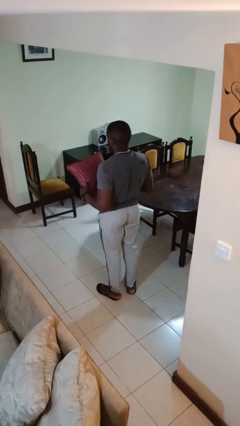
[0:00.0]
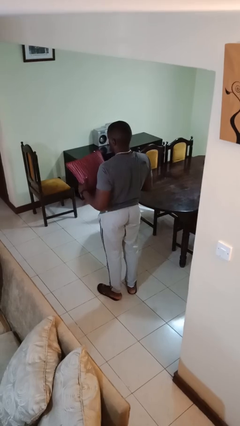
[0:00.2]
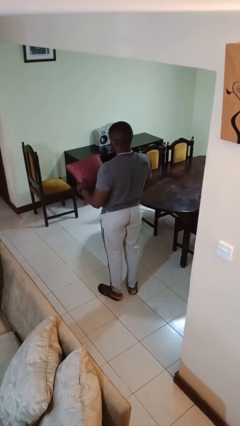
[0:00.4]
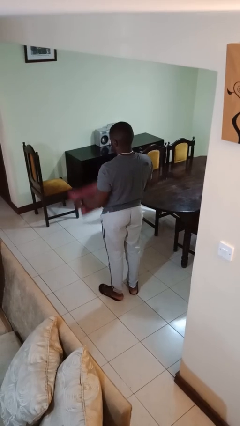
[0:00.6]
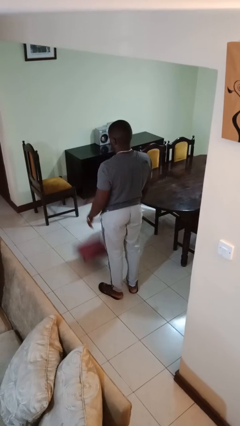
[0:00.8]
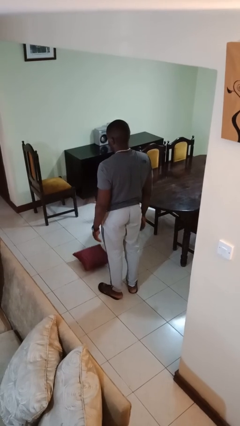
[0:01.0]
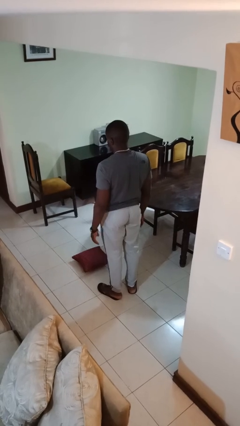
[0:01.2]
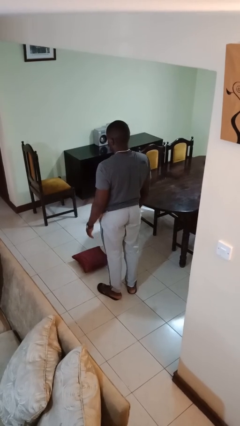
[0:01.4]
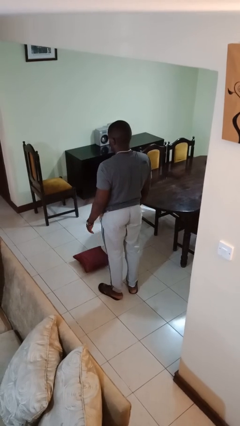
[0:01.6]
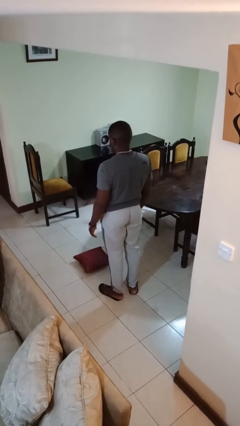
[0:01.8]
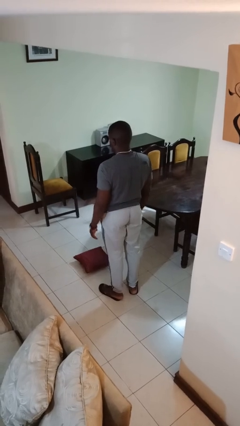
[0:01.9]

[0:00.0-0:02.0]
person throws object to ground

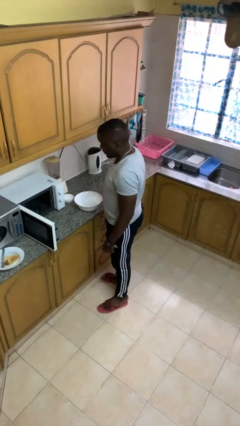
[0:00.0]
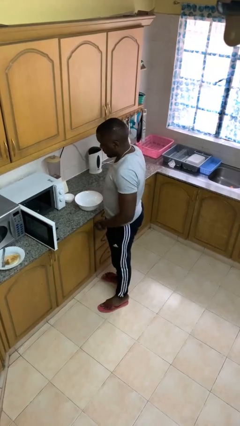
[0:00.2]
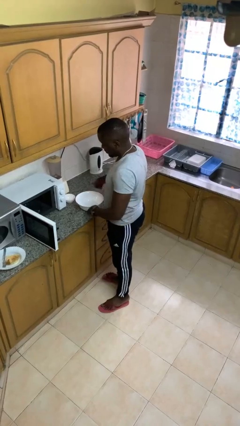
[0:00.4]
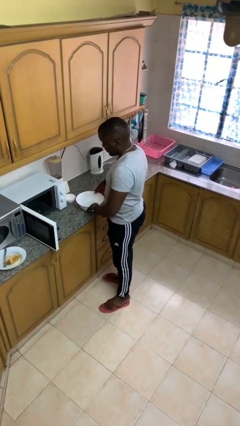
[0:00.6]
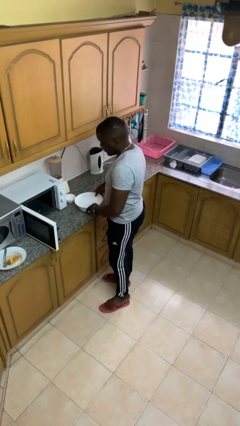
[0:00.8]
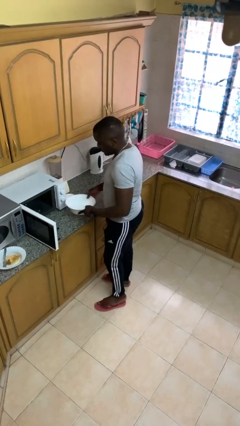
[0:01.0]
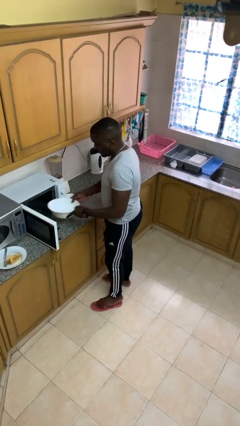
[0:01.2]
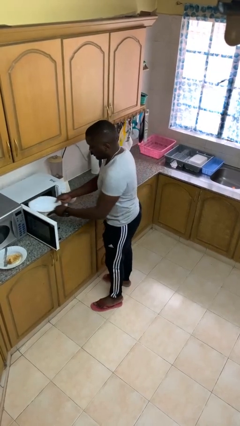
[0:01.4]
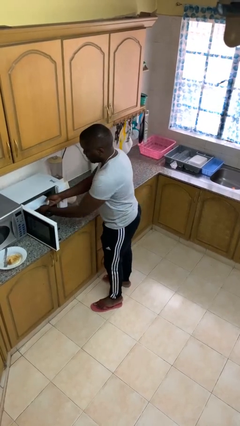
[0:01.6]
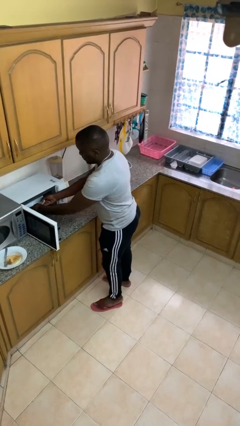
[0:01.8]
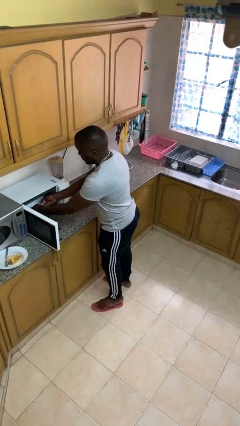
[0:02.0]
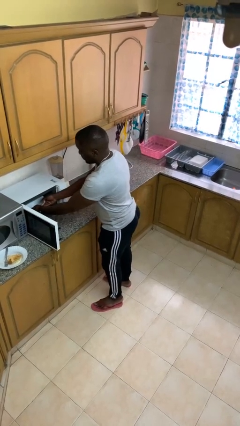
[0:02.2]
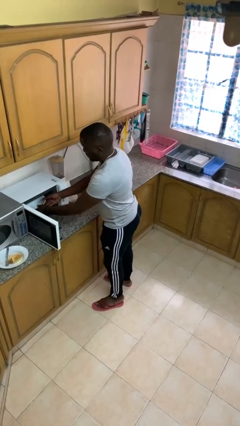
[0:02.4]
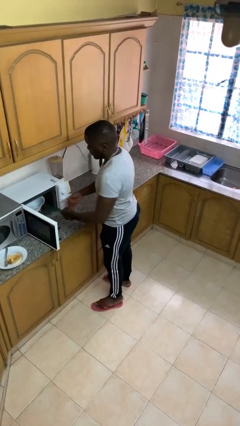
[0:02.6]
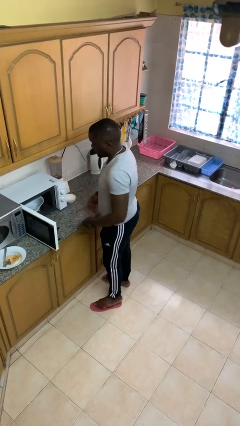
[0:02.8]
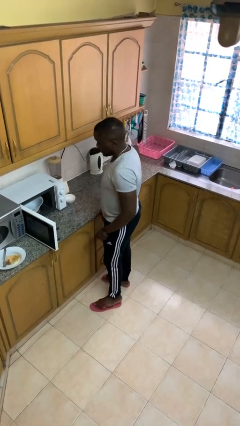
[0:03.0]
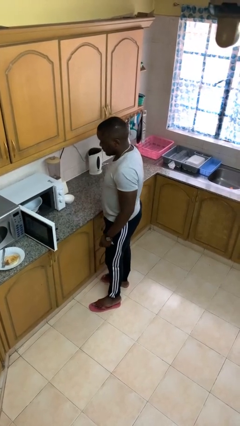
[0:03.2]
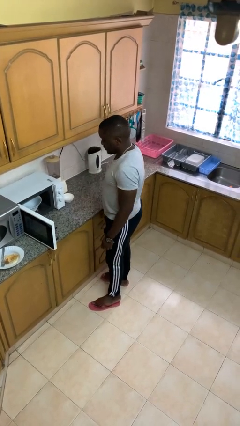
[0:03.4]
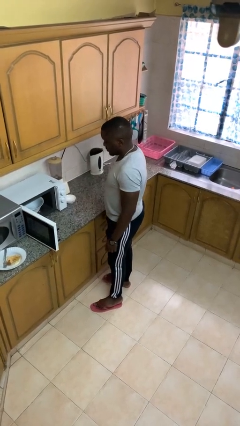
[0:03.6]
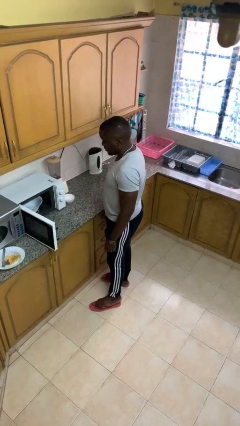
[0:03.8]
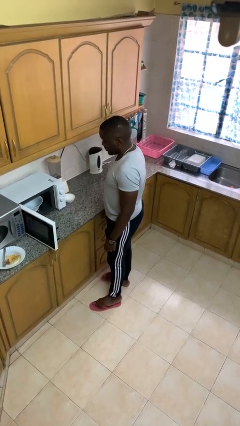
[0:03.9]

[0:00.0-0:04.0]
person puts object into microwave

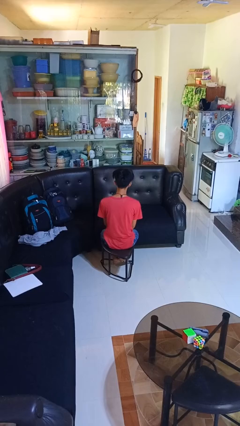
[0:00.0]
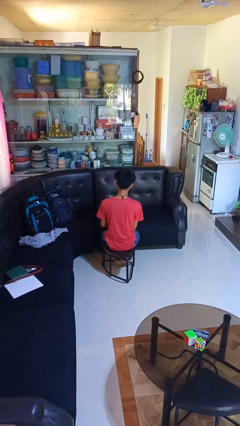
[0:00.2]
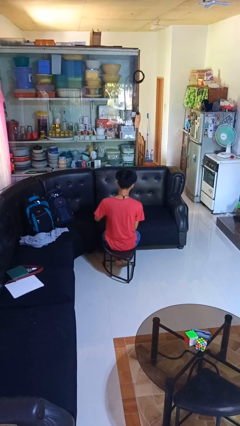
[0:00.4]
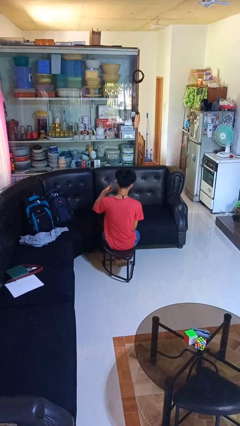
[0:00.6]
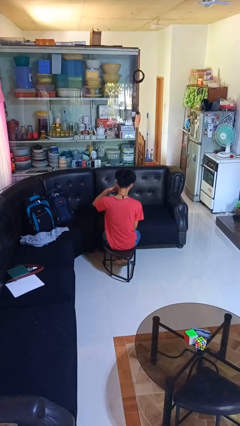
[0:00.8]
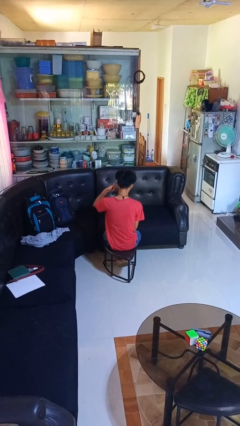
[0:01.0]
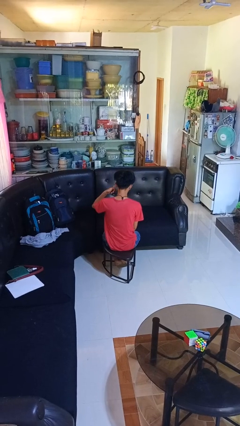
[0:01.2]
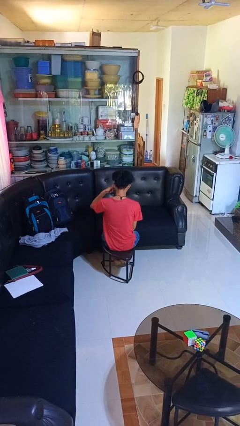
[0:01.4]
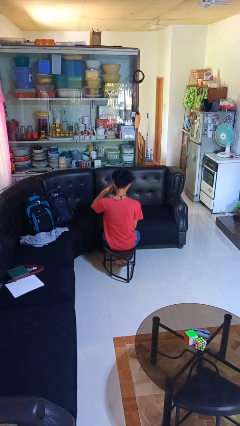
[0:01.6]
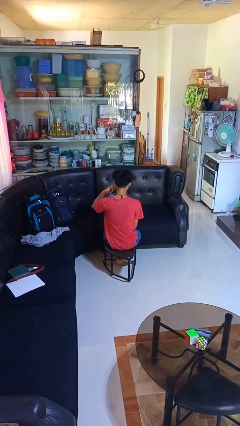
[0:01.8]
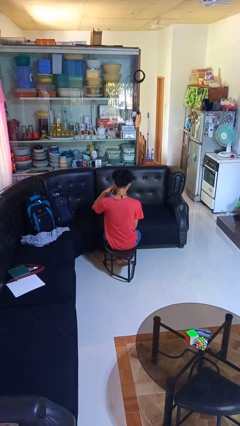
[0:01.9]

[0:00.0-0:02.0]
person gestures call me

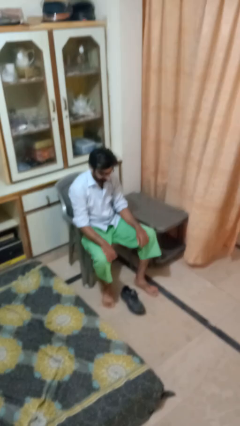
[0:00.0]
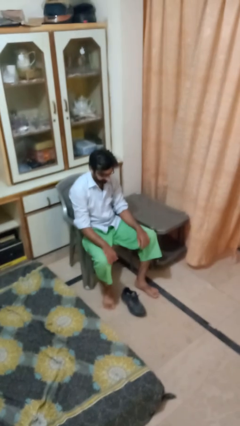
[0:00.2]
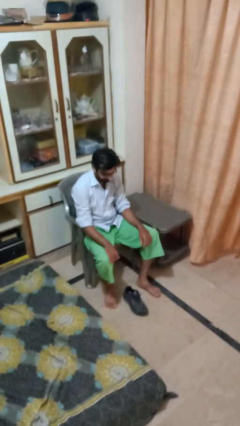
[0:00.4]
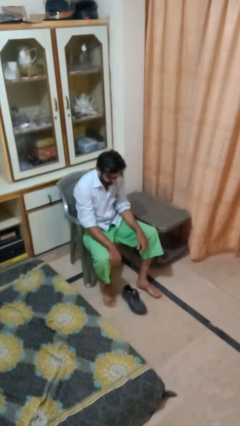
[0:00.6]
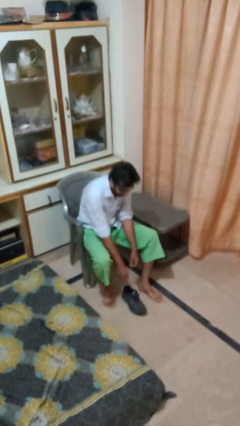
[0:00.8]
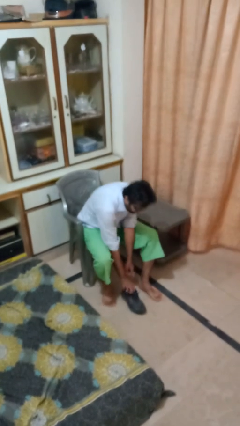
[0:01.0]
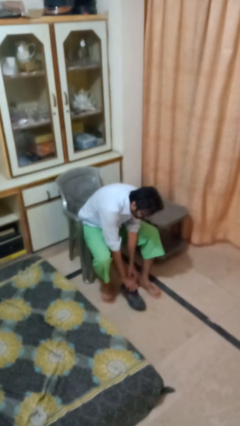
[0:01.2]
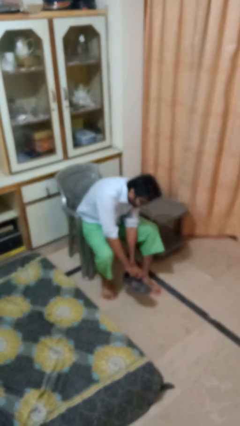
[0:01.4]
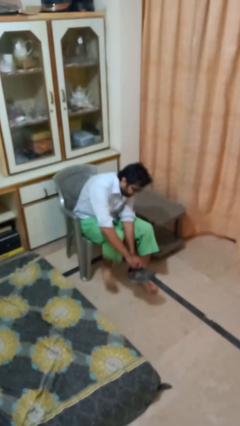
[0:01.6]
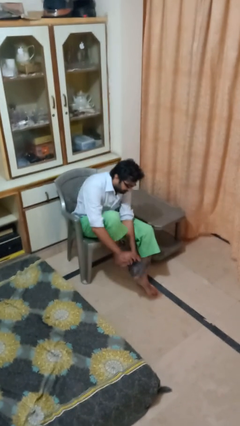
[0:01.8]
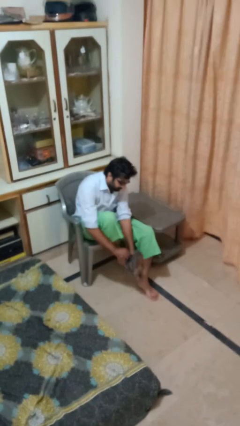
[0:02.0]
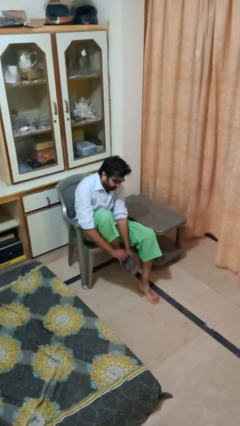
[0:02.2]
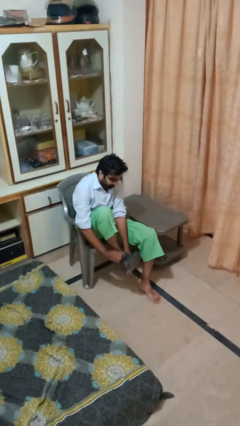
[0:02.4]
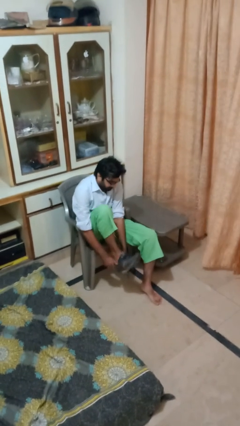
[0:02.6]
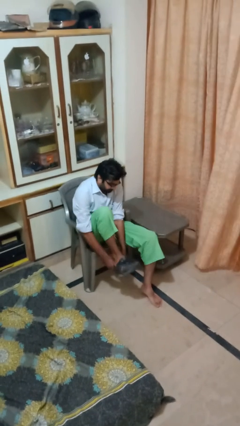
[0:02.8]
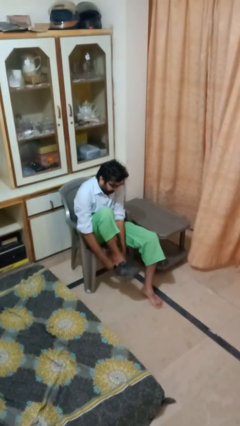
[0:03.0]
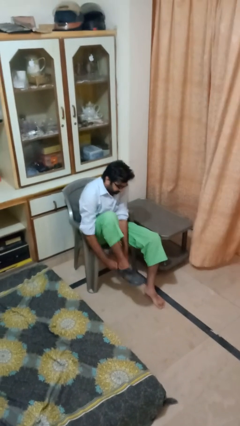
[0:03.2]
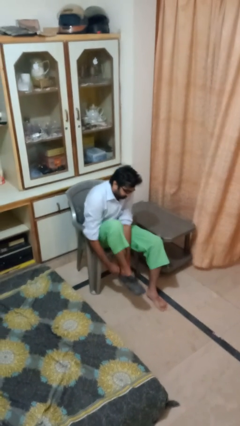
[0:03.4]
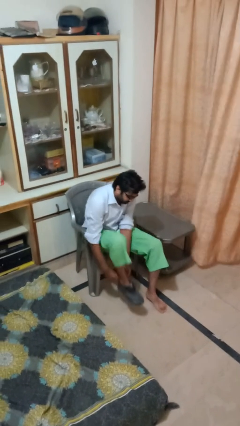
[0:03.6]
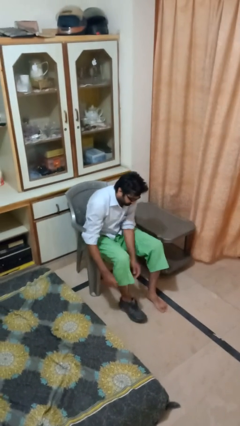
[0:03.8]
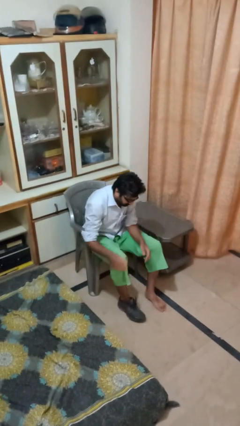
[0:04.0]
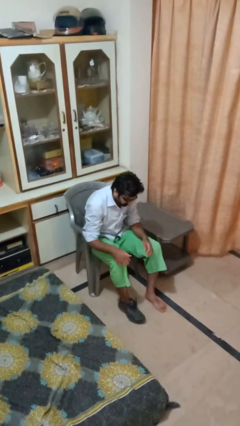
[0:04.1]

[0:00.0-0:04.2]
person puts on boots

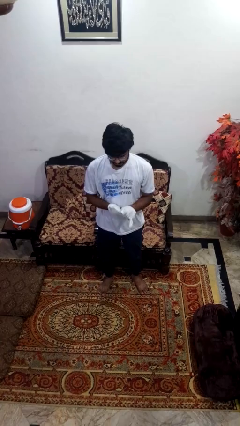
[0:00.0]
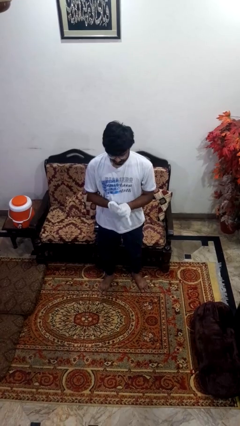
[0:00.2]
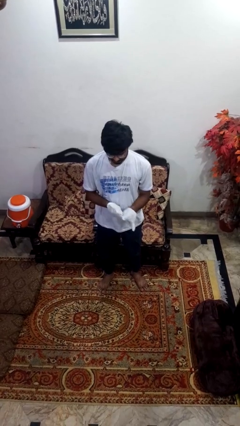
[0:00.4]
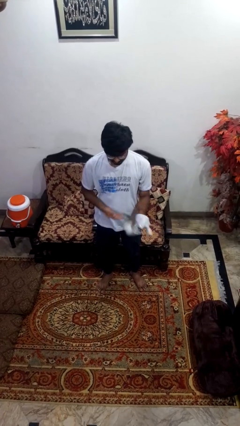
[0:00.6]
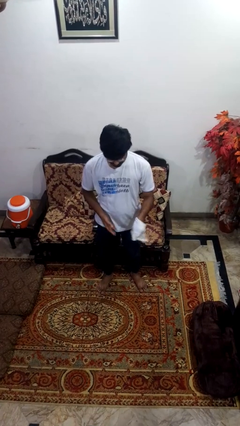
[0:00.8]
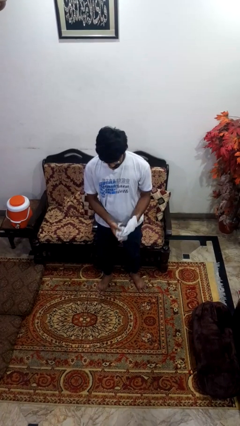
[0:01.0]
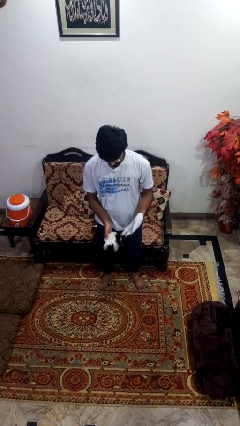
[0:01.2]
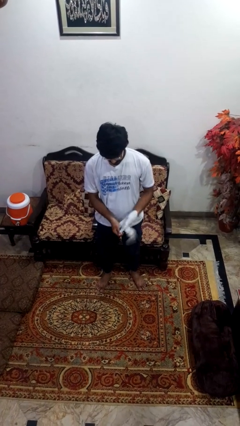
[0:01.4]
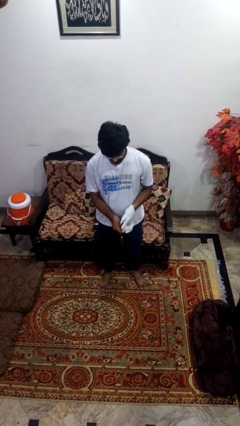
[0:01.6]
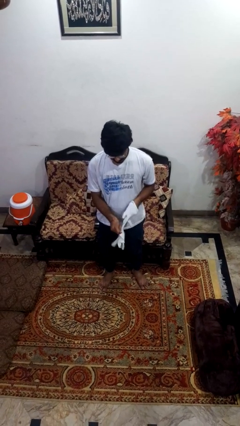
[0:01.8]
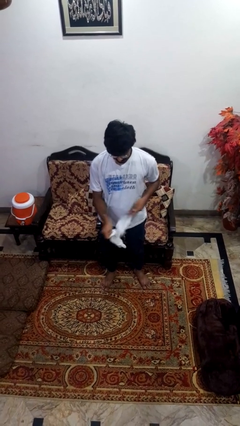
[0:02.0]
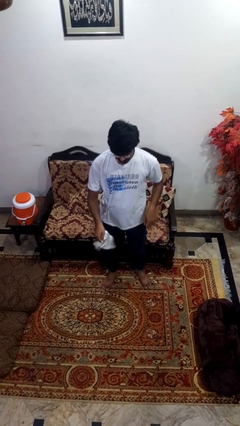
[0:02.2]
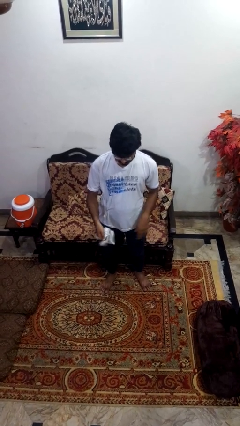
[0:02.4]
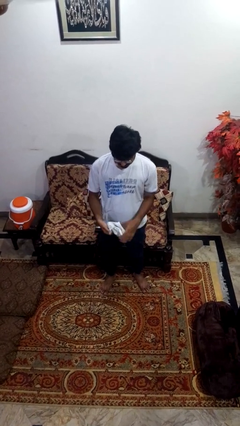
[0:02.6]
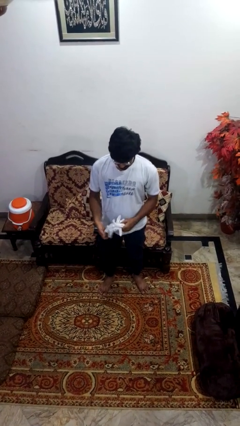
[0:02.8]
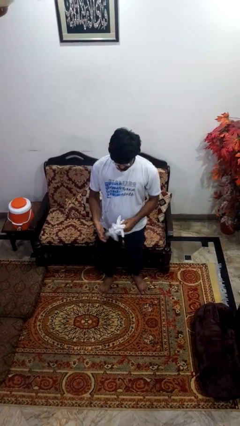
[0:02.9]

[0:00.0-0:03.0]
person takes off gloves

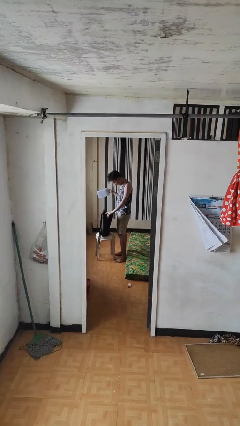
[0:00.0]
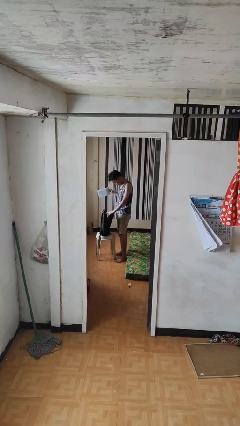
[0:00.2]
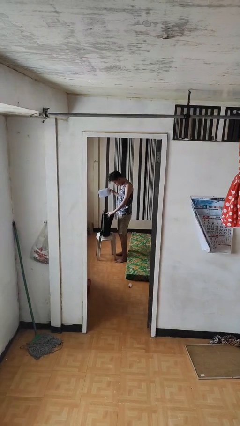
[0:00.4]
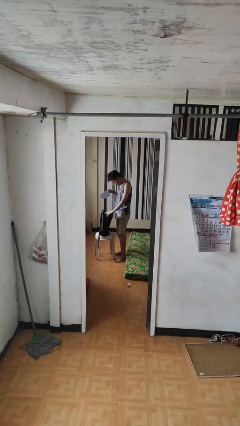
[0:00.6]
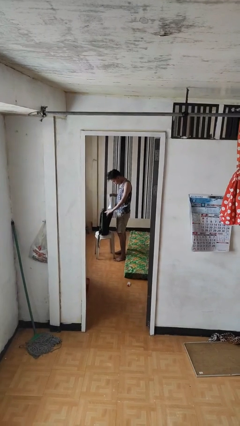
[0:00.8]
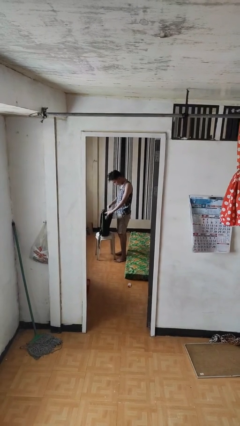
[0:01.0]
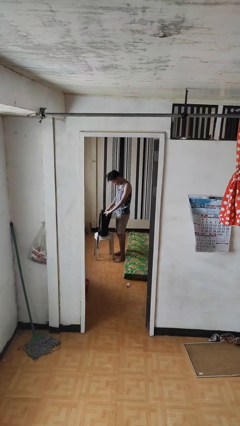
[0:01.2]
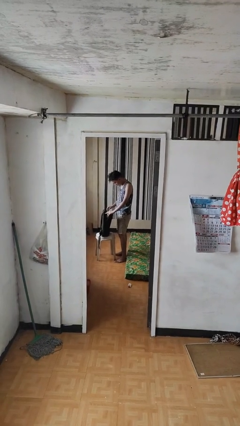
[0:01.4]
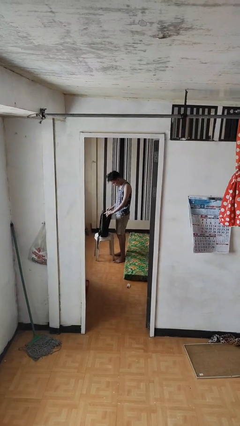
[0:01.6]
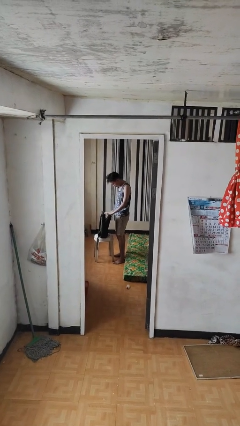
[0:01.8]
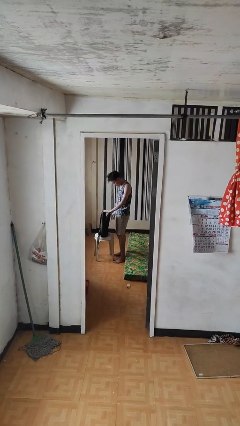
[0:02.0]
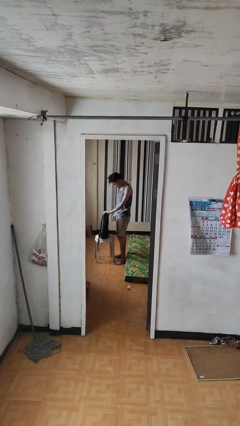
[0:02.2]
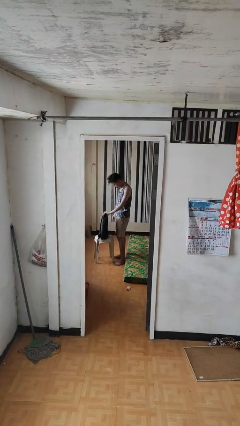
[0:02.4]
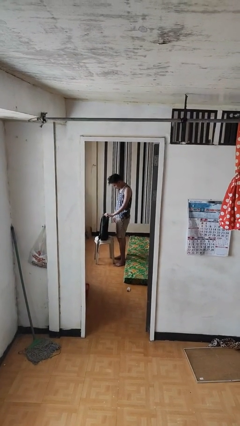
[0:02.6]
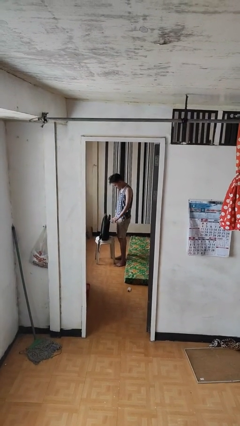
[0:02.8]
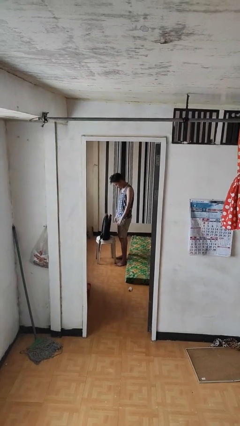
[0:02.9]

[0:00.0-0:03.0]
person puts object into backpack
